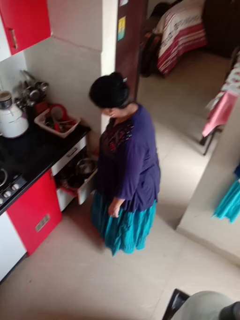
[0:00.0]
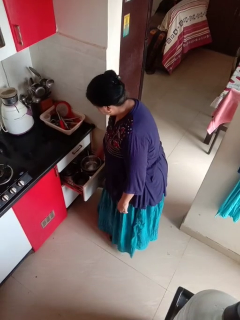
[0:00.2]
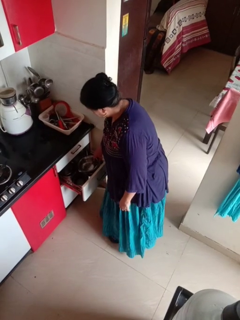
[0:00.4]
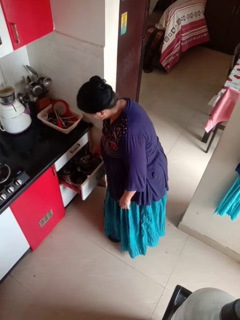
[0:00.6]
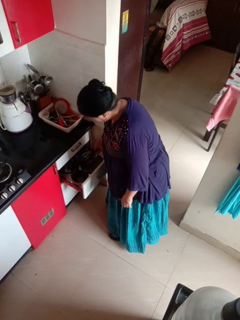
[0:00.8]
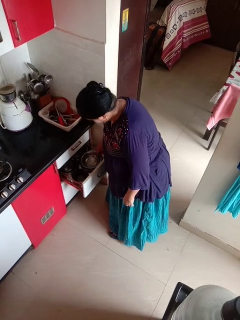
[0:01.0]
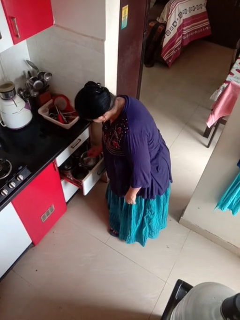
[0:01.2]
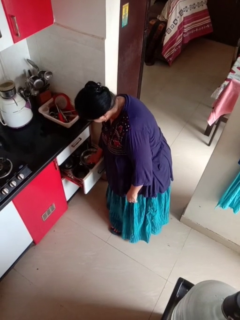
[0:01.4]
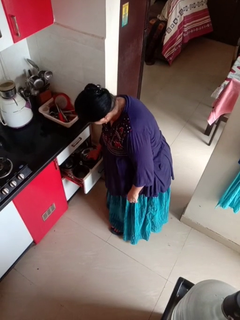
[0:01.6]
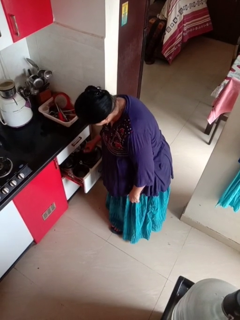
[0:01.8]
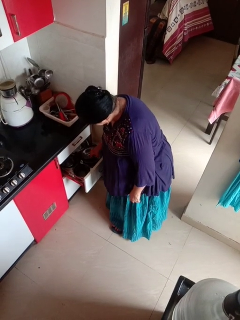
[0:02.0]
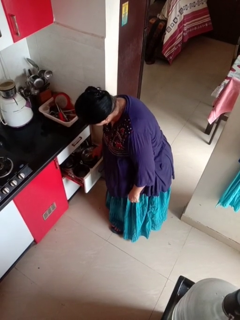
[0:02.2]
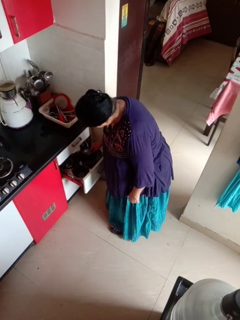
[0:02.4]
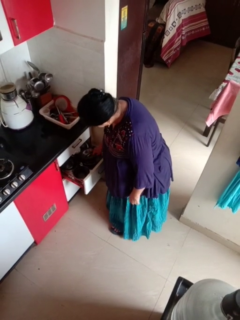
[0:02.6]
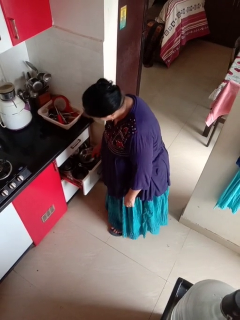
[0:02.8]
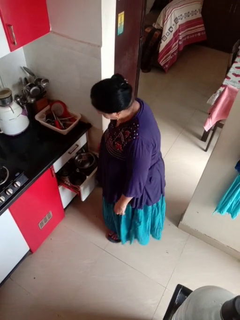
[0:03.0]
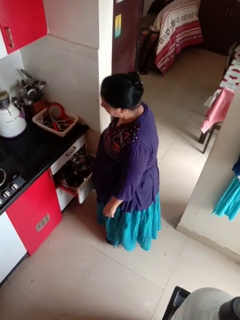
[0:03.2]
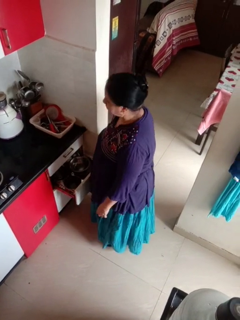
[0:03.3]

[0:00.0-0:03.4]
person searches in kitchen drawer

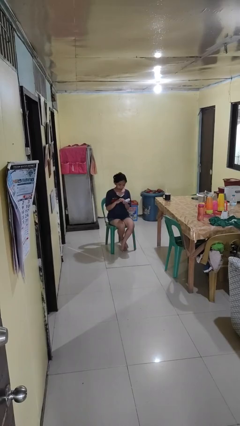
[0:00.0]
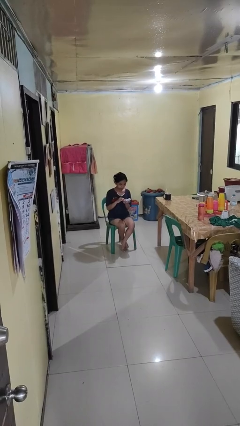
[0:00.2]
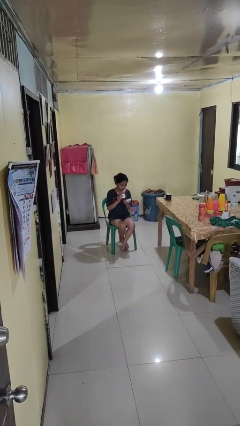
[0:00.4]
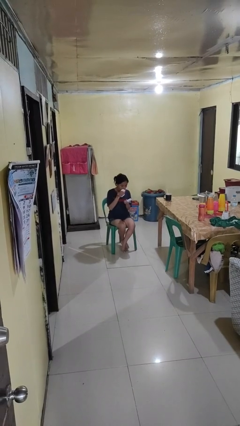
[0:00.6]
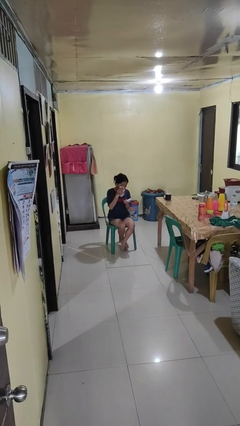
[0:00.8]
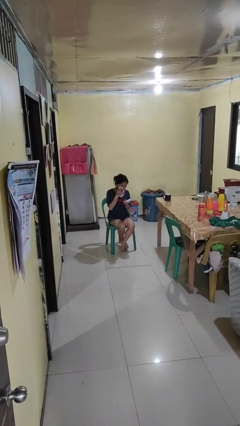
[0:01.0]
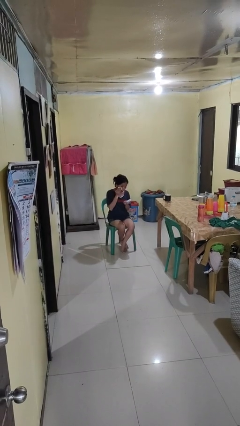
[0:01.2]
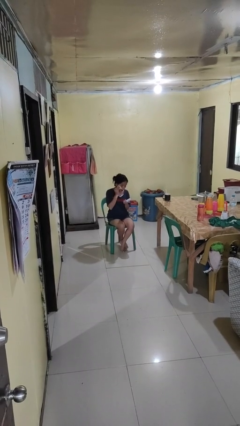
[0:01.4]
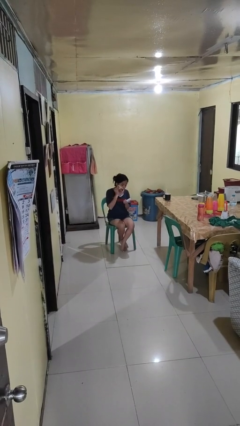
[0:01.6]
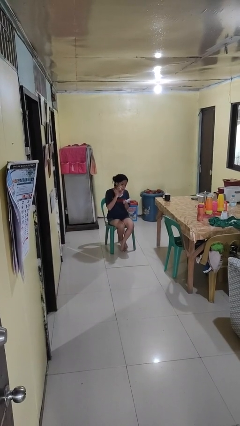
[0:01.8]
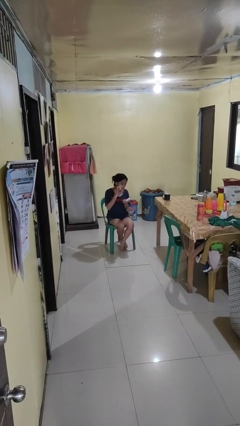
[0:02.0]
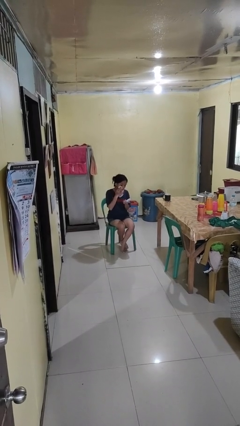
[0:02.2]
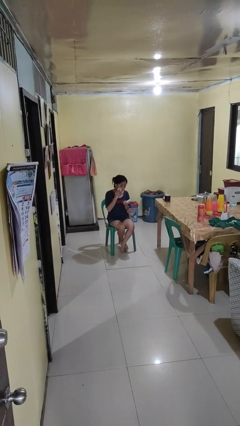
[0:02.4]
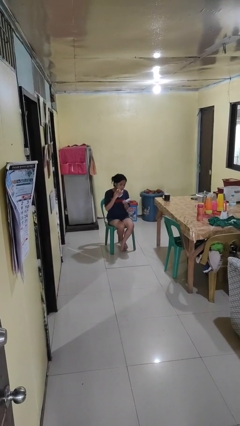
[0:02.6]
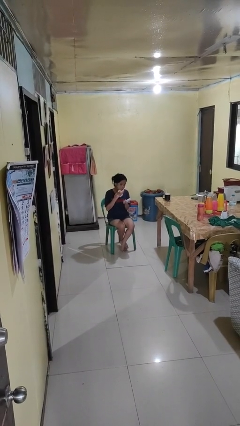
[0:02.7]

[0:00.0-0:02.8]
person applies foundation makeup

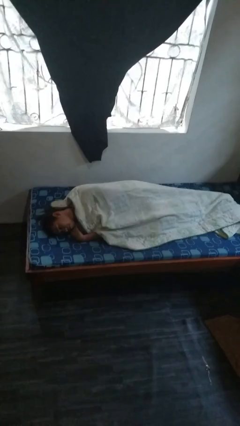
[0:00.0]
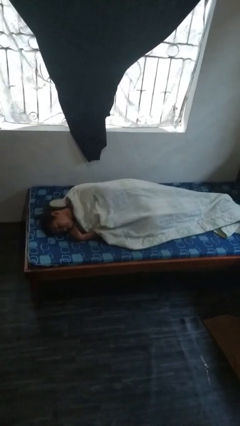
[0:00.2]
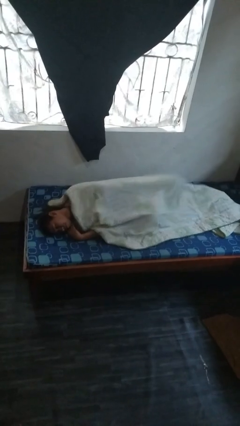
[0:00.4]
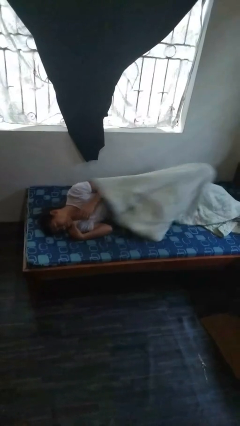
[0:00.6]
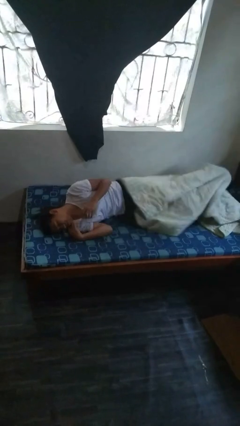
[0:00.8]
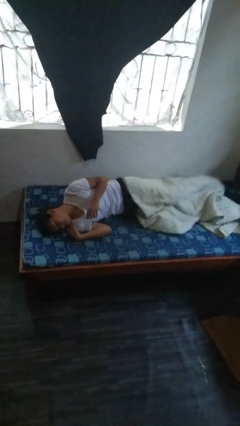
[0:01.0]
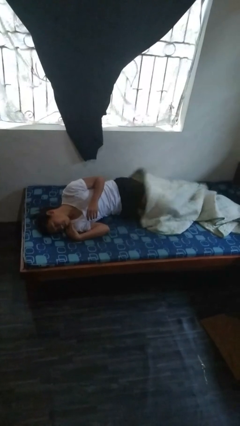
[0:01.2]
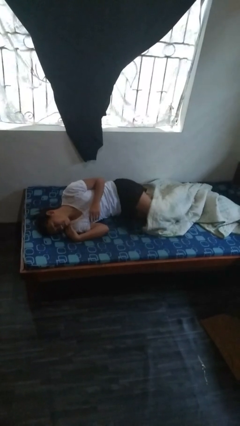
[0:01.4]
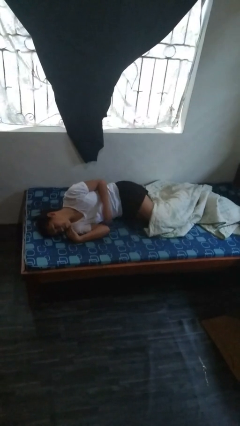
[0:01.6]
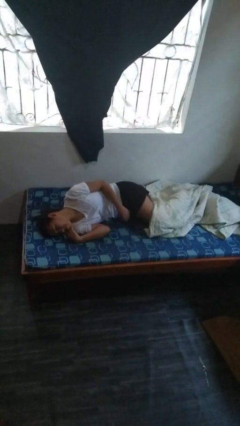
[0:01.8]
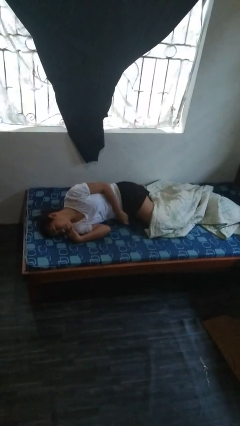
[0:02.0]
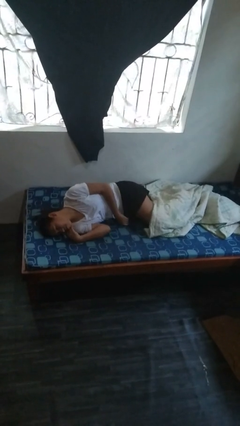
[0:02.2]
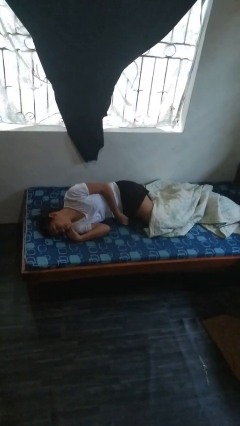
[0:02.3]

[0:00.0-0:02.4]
person uncovers with bedsheets

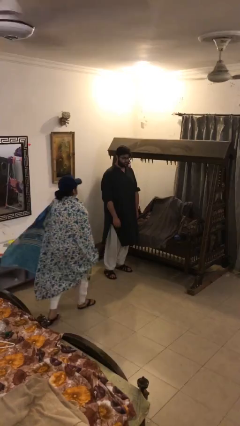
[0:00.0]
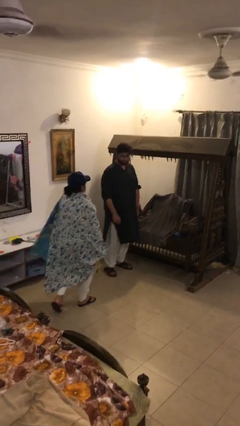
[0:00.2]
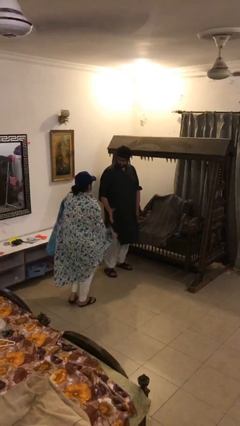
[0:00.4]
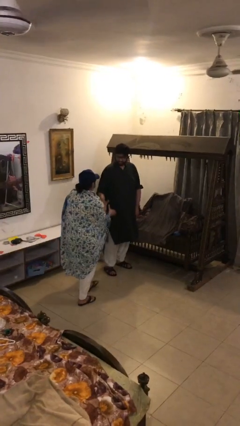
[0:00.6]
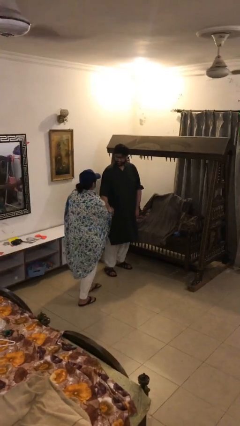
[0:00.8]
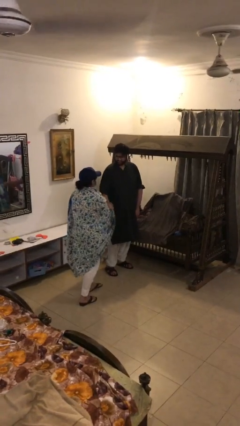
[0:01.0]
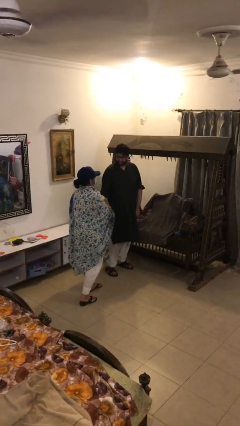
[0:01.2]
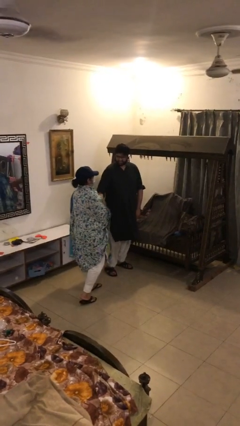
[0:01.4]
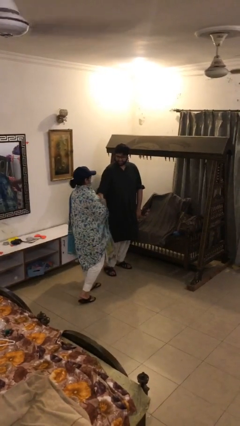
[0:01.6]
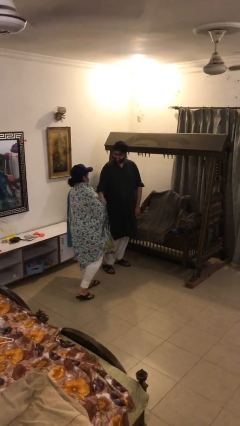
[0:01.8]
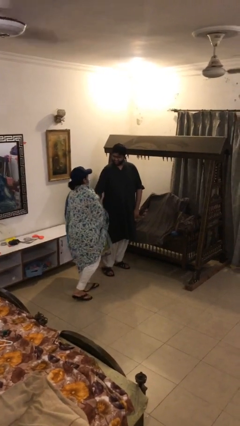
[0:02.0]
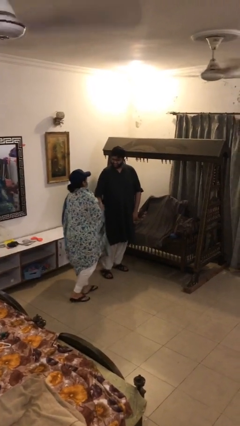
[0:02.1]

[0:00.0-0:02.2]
person shakes hand

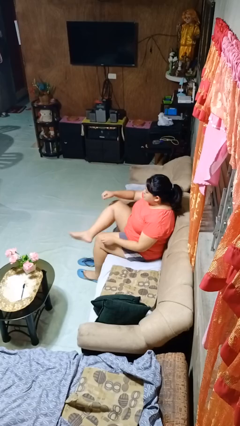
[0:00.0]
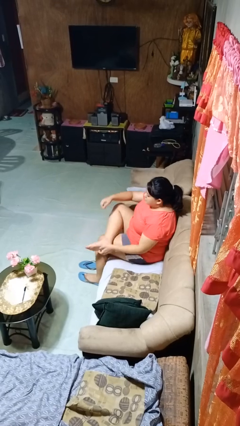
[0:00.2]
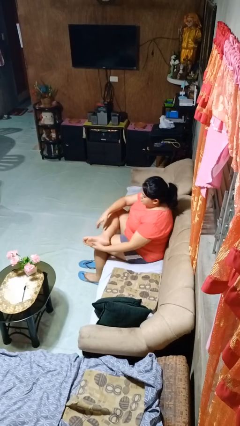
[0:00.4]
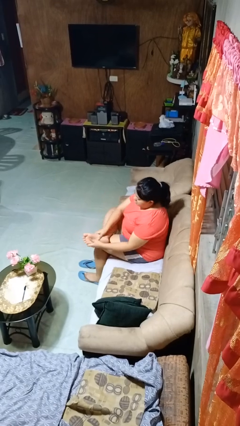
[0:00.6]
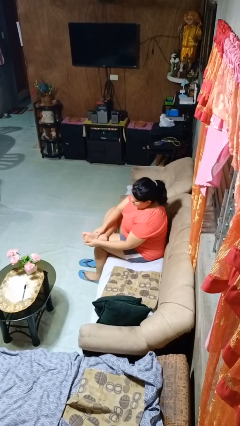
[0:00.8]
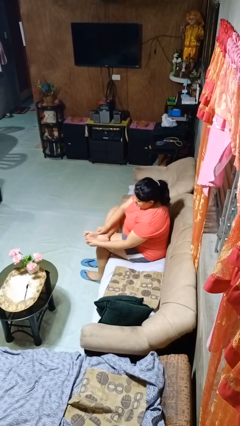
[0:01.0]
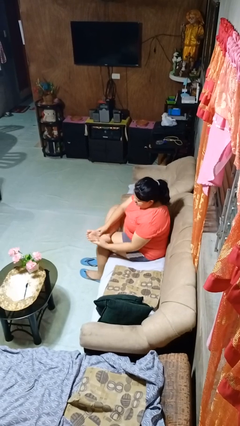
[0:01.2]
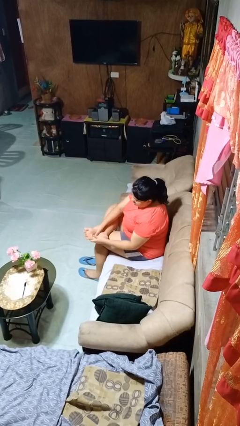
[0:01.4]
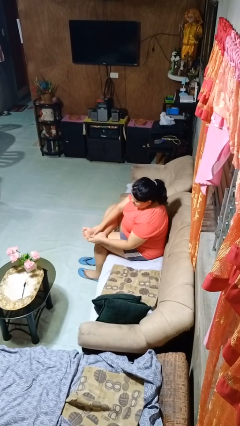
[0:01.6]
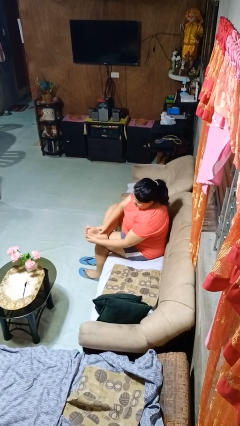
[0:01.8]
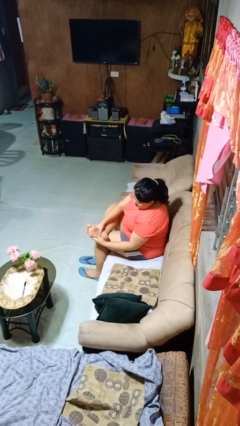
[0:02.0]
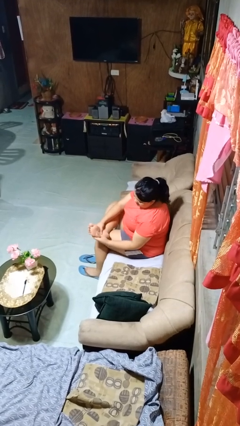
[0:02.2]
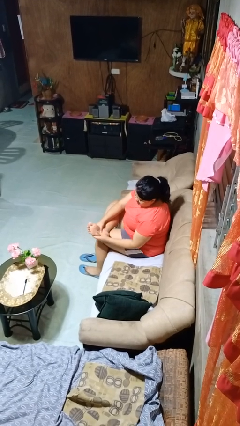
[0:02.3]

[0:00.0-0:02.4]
person rubs foot

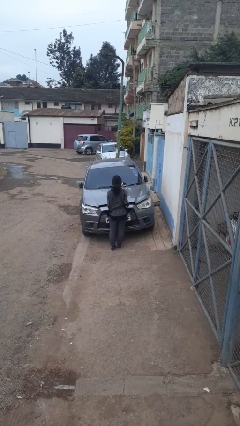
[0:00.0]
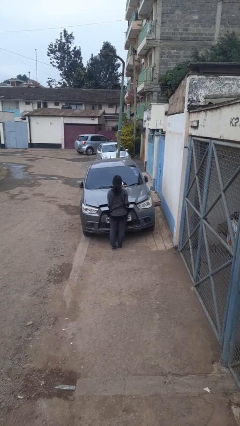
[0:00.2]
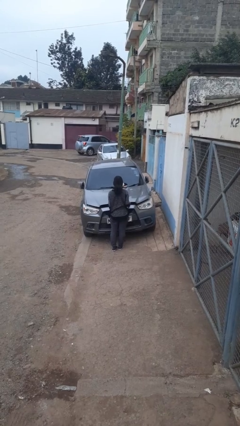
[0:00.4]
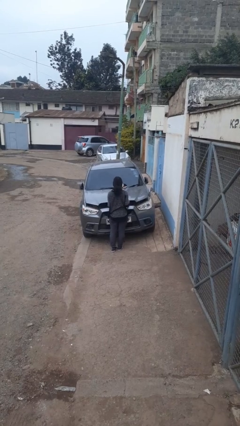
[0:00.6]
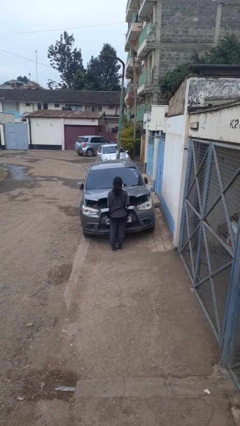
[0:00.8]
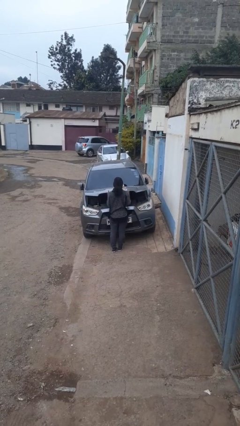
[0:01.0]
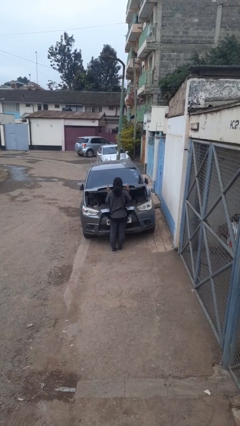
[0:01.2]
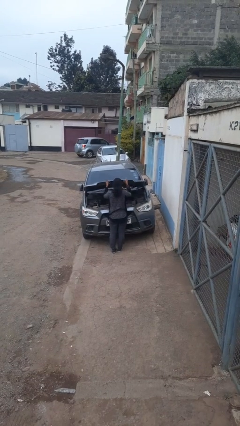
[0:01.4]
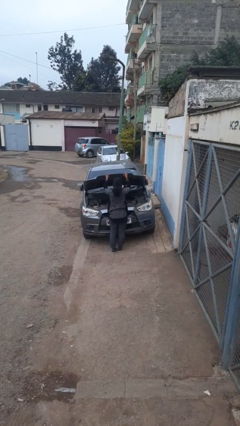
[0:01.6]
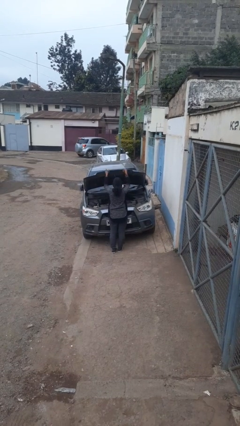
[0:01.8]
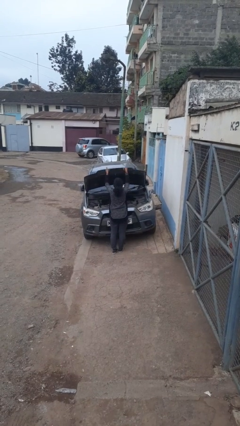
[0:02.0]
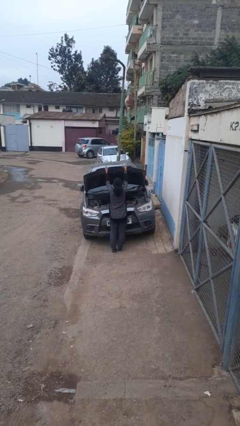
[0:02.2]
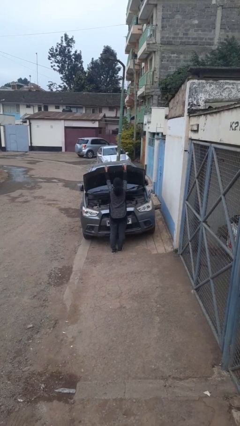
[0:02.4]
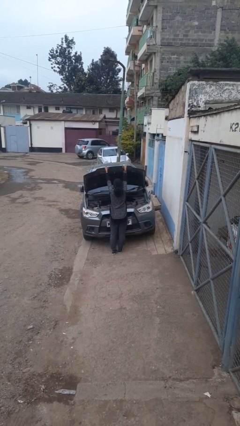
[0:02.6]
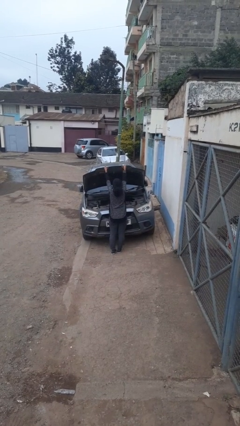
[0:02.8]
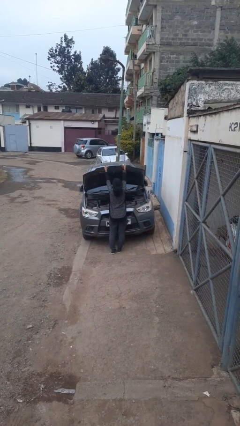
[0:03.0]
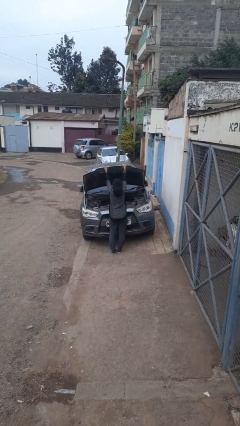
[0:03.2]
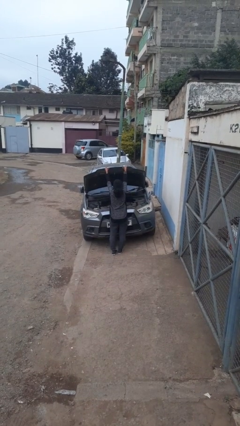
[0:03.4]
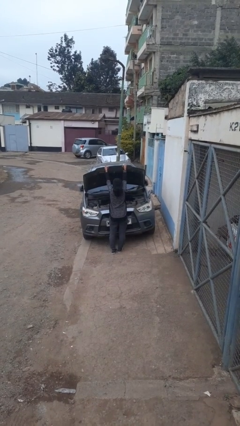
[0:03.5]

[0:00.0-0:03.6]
person opens car hood

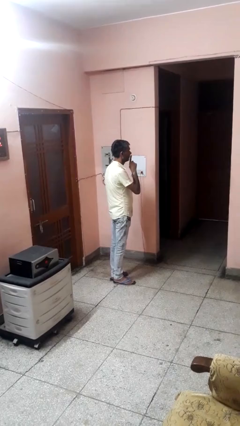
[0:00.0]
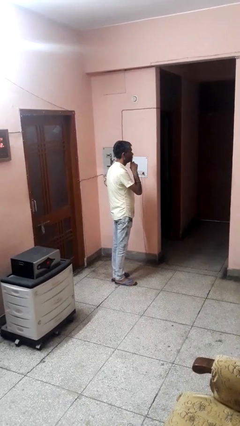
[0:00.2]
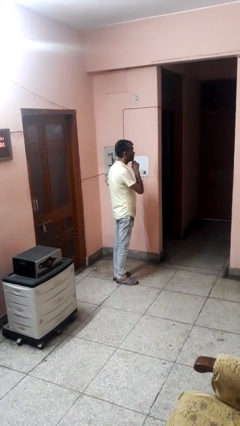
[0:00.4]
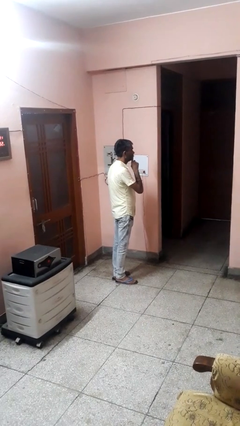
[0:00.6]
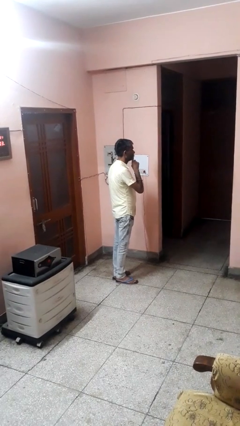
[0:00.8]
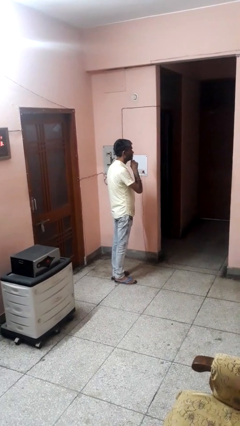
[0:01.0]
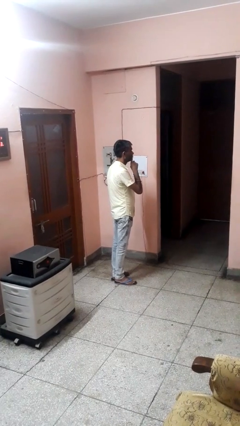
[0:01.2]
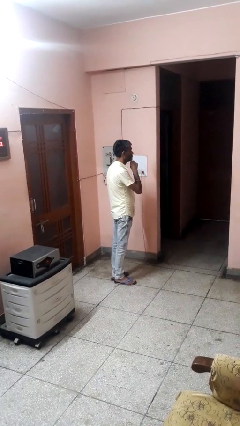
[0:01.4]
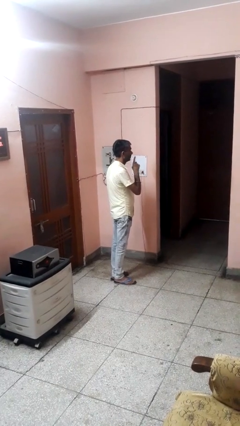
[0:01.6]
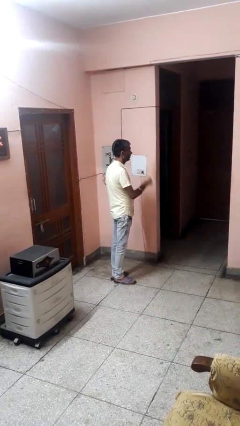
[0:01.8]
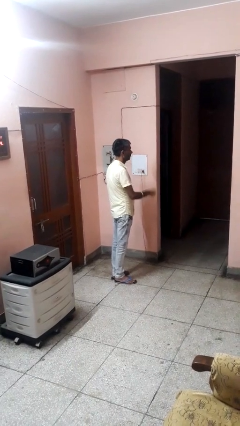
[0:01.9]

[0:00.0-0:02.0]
person gestures be quiet
